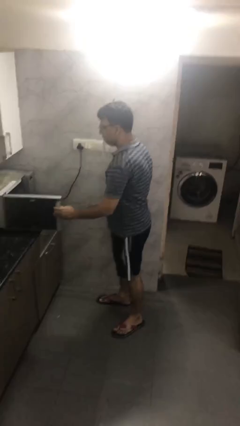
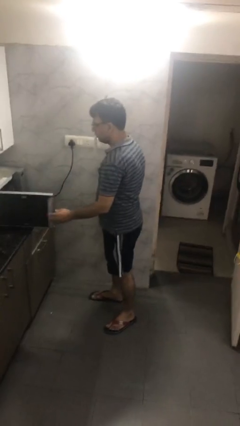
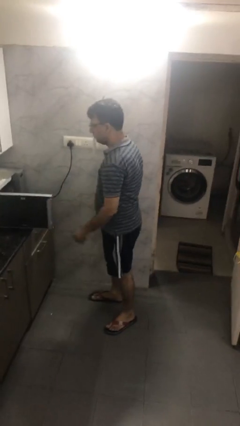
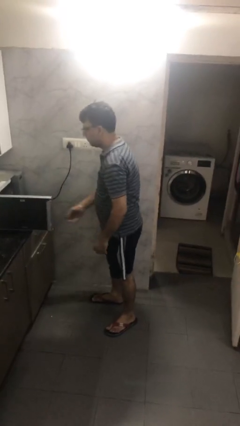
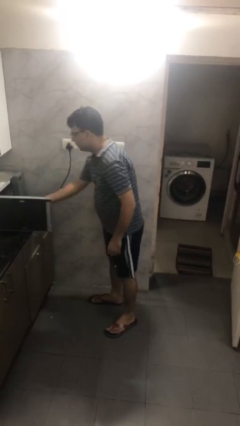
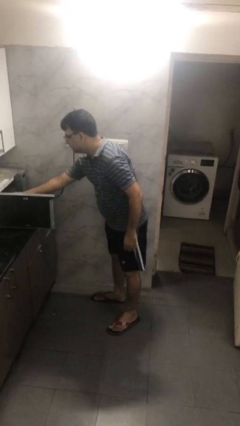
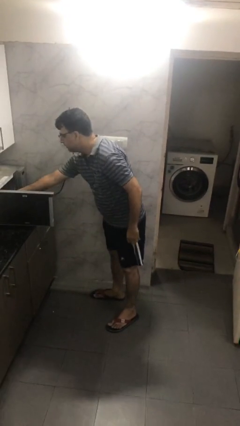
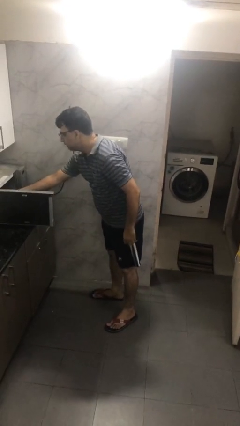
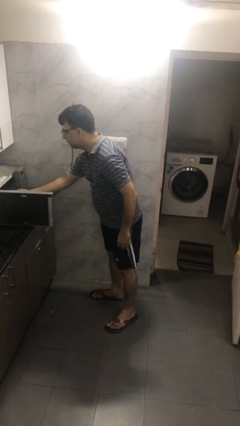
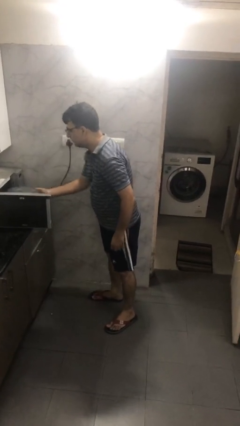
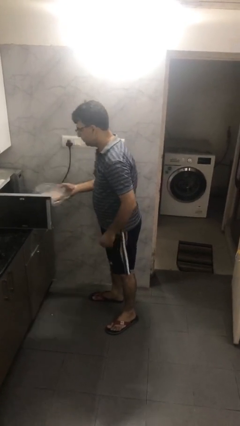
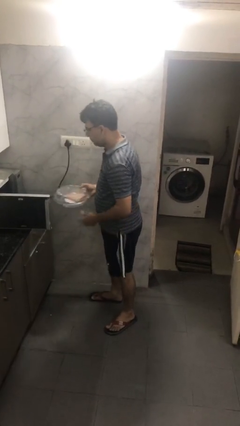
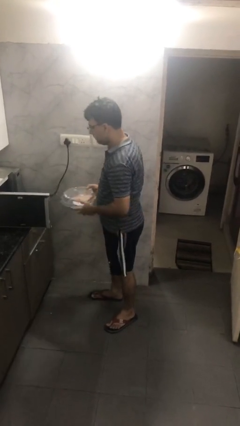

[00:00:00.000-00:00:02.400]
person takes object from microwave

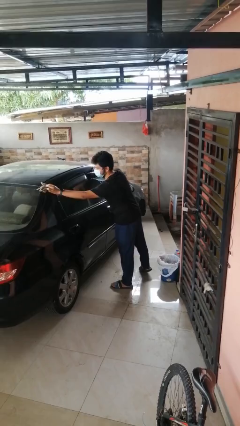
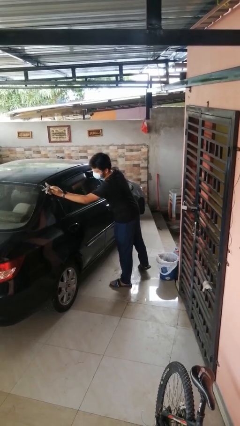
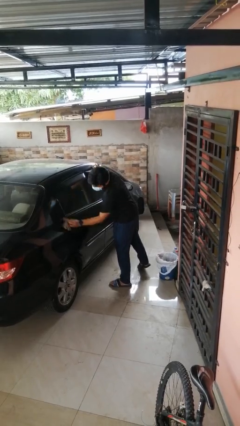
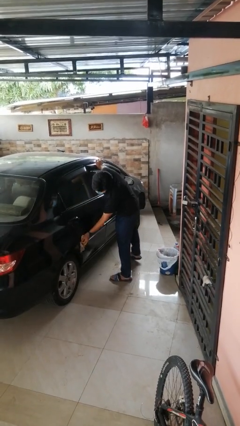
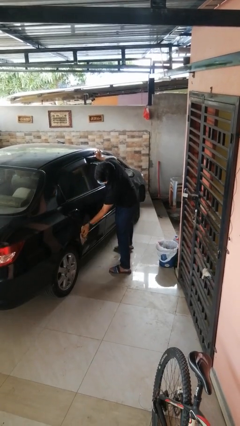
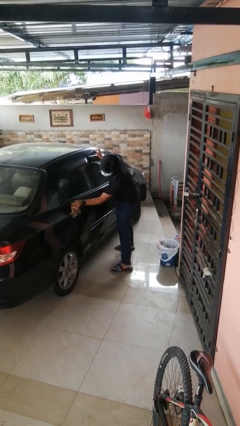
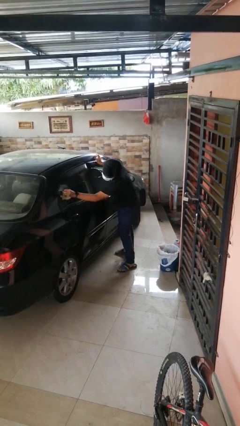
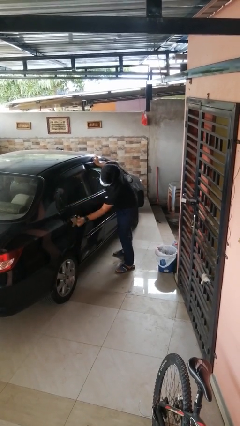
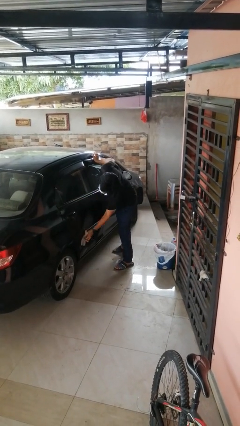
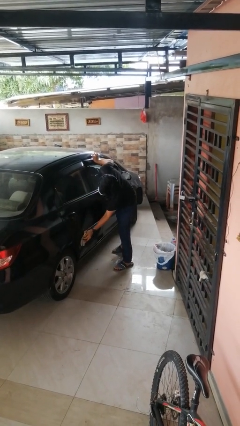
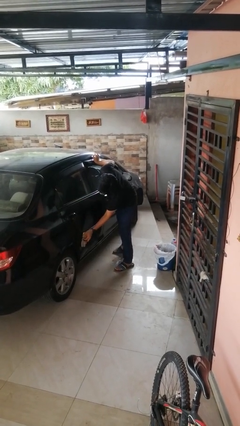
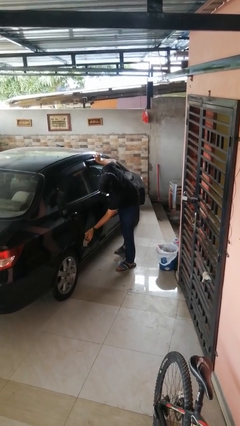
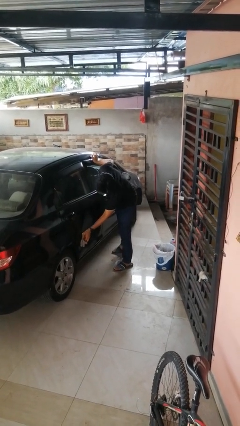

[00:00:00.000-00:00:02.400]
person polishes car with rag

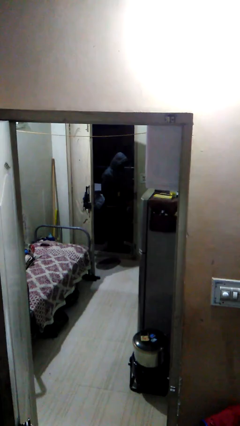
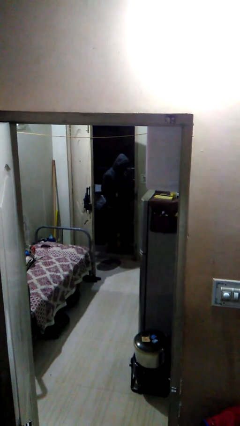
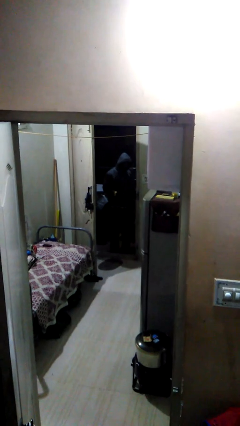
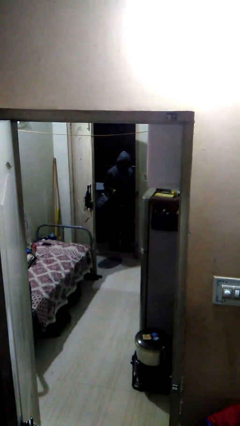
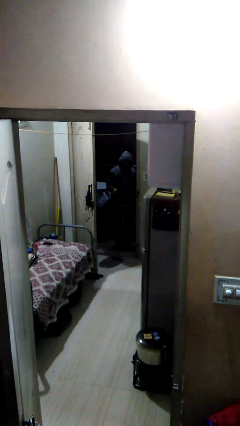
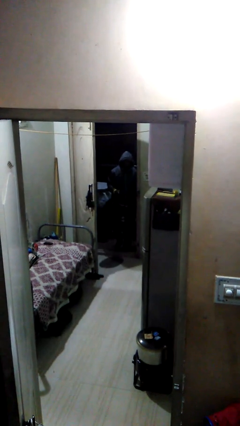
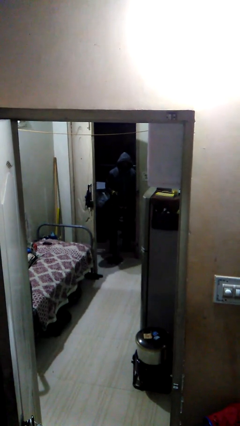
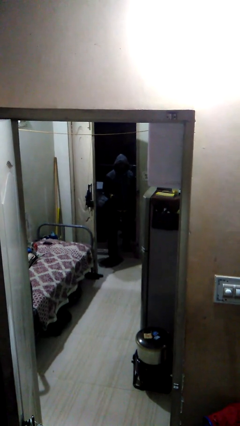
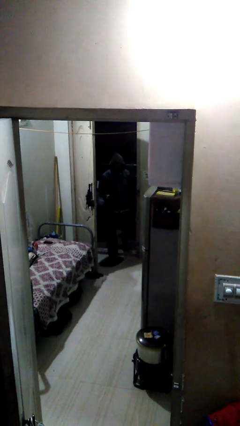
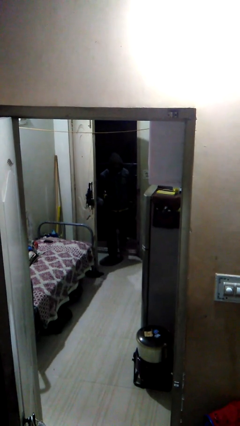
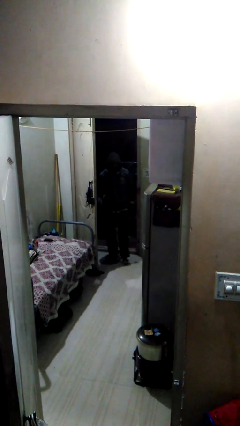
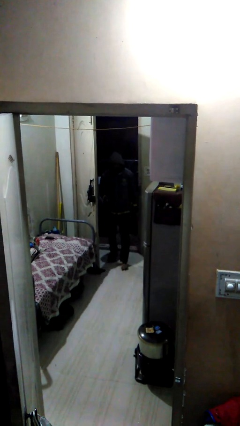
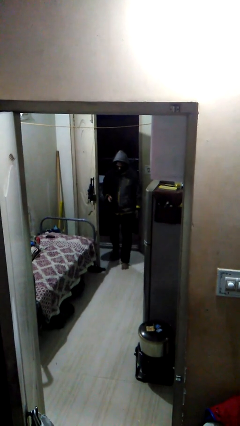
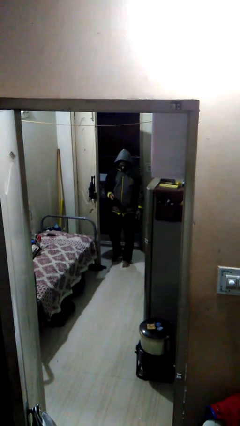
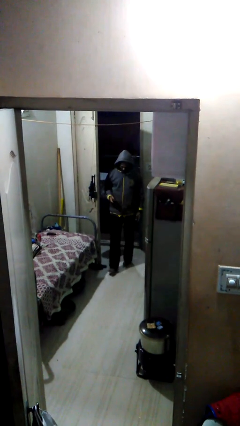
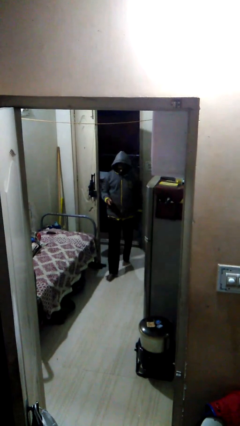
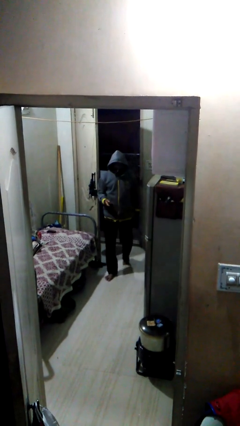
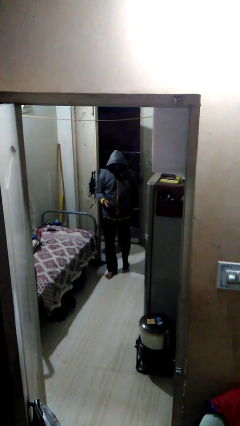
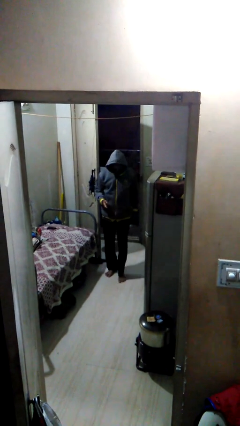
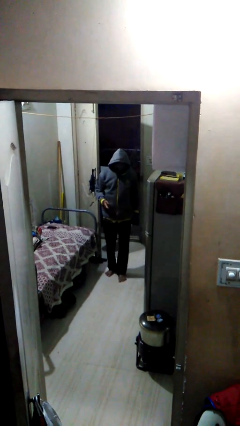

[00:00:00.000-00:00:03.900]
person enters scene through structure

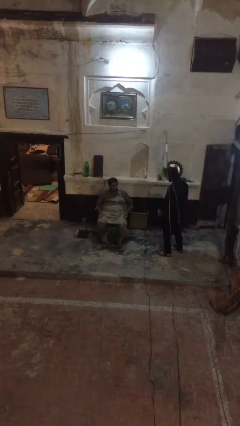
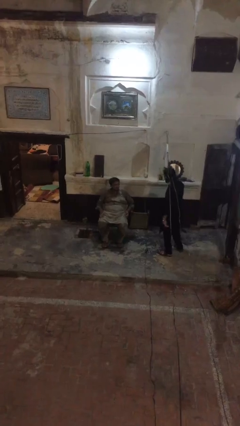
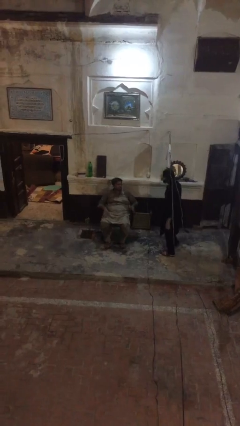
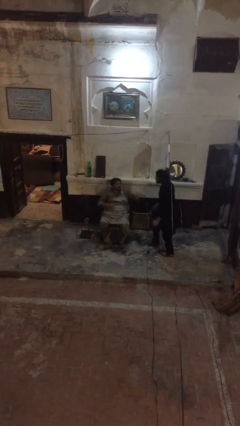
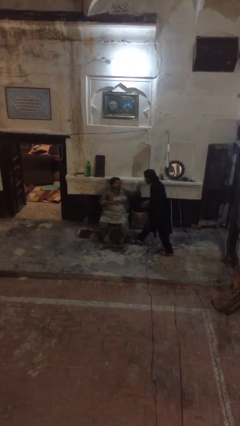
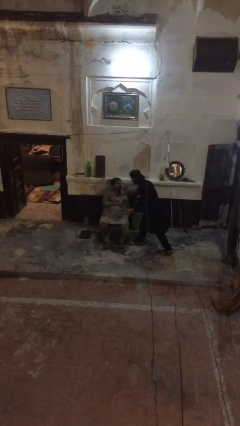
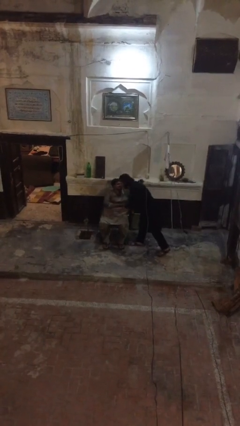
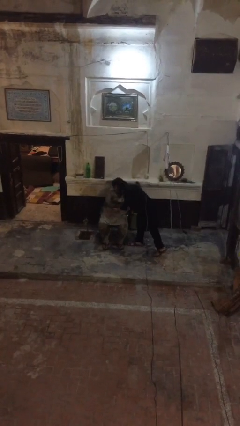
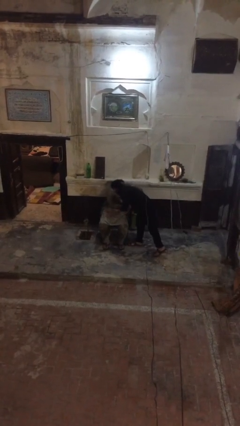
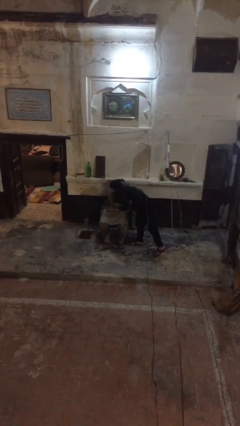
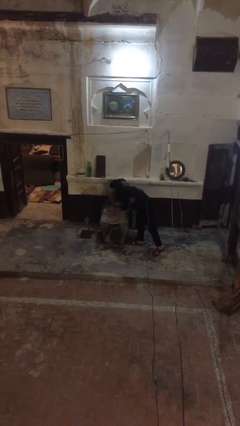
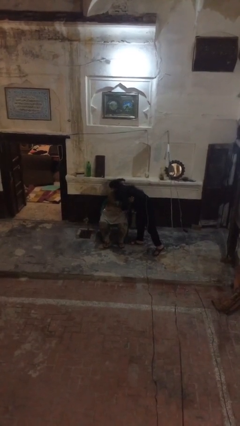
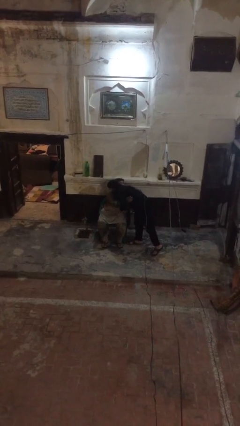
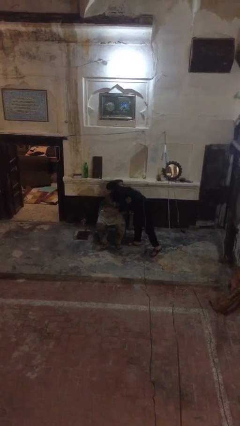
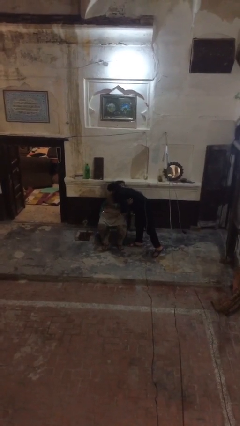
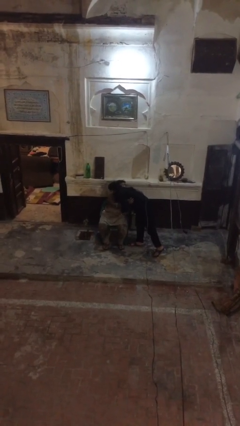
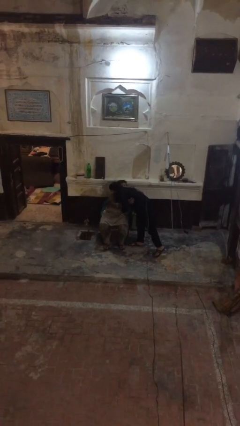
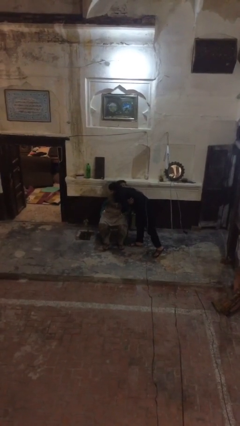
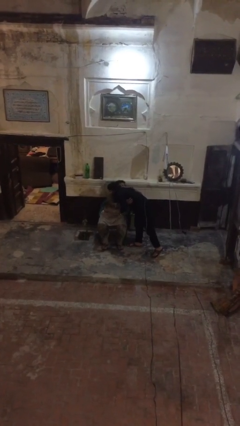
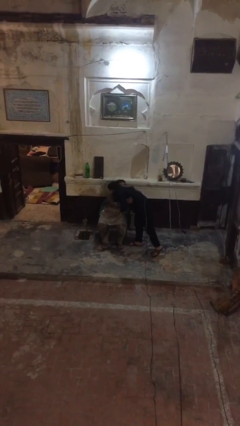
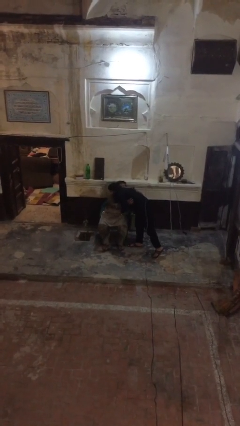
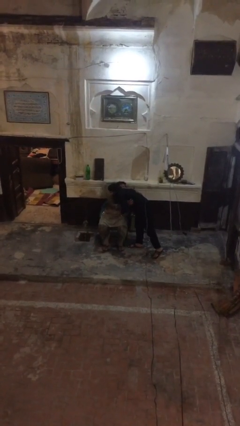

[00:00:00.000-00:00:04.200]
person embraces person

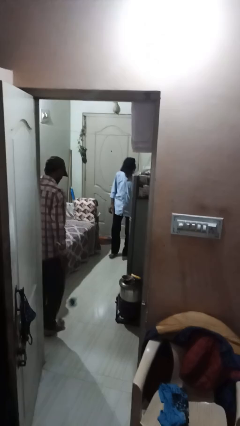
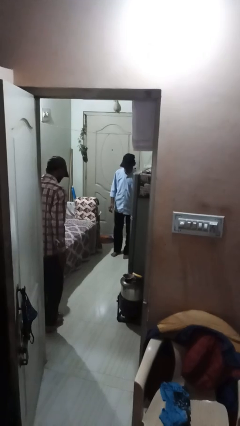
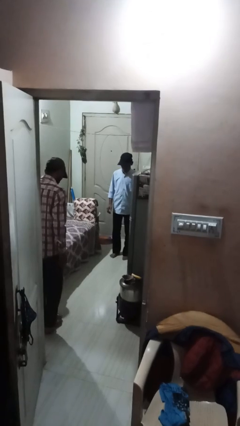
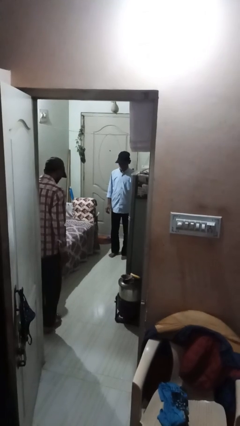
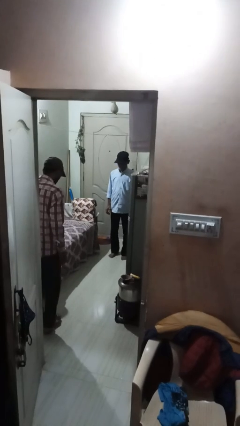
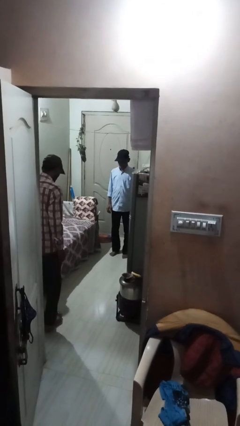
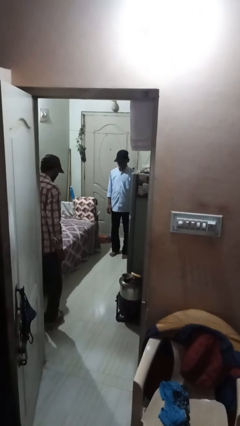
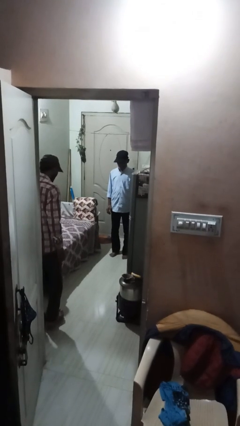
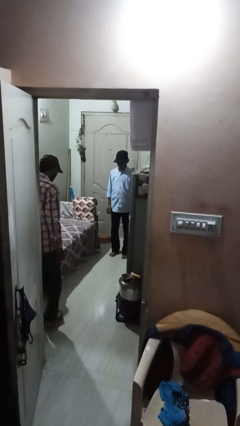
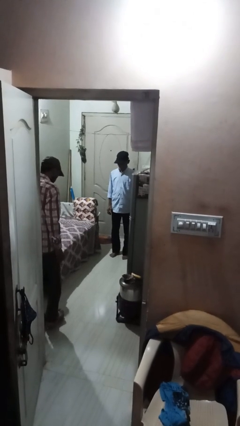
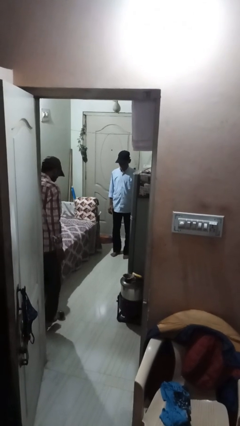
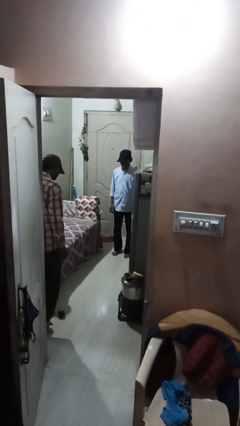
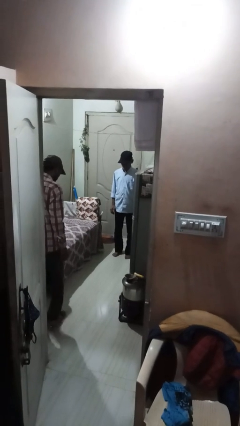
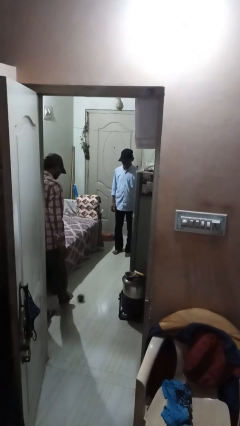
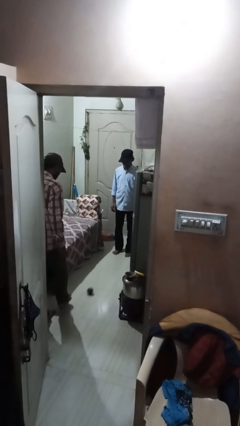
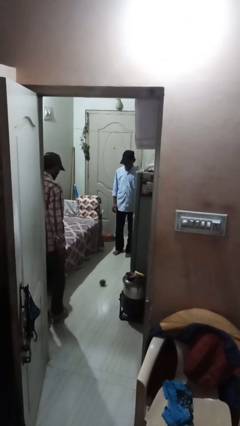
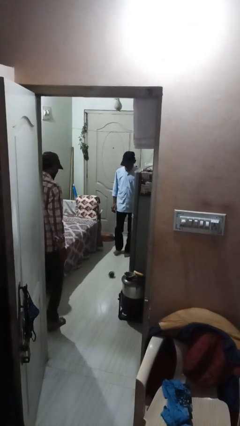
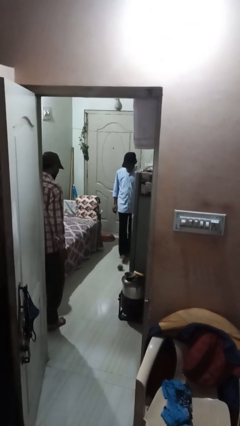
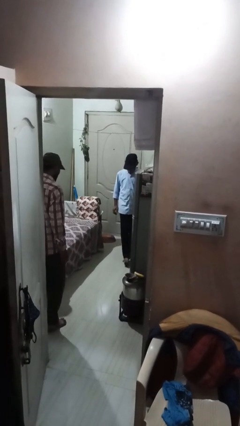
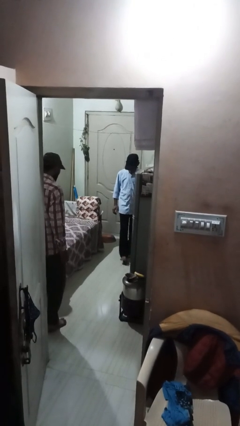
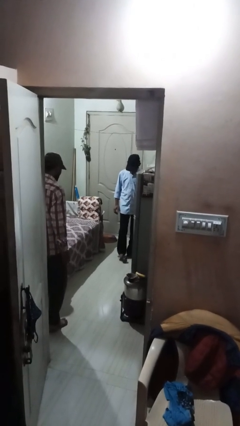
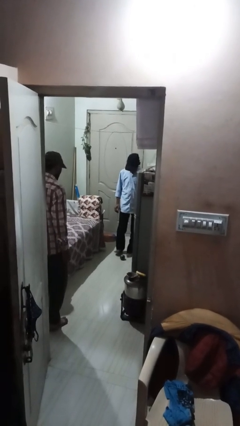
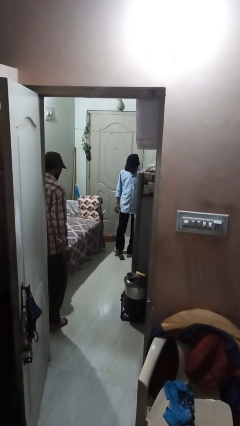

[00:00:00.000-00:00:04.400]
person kicks object to person

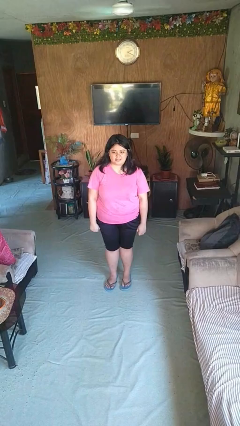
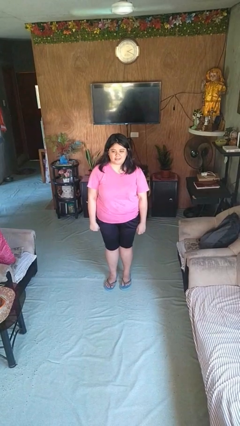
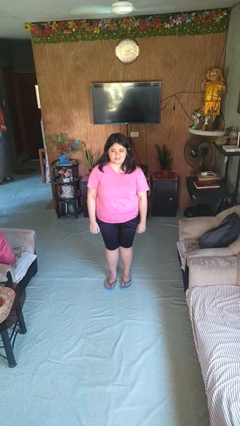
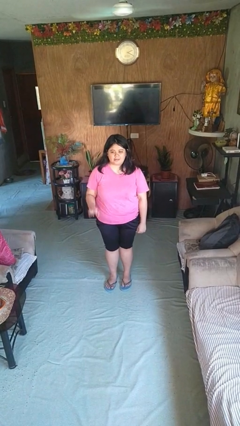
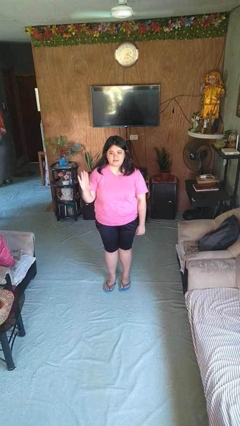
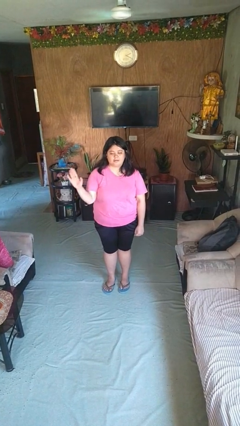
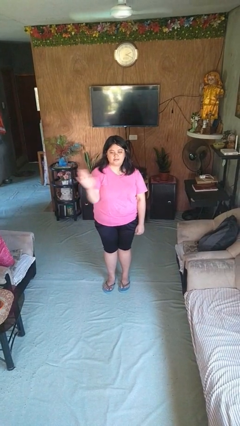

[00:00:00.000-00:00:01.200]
person gestures swipe left
